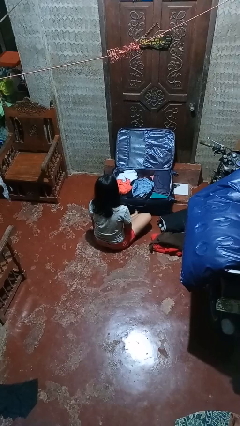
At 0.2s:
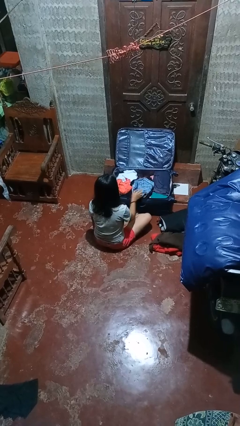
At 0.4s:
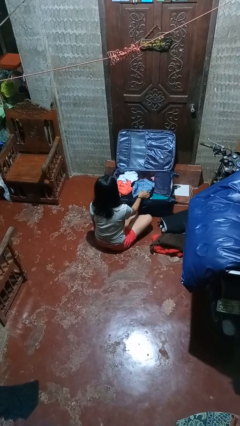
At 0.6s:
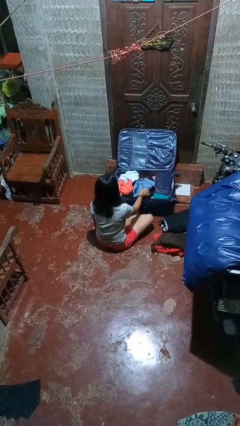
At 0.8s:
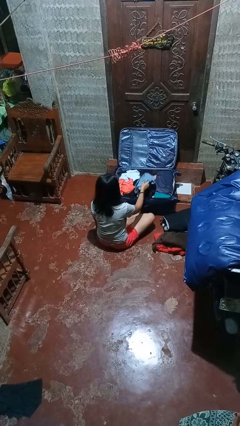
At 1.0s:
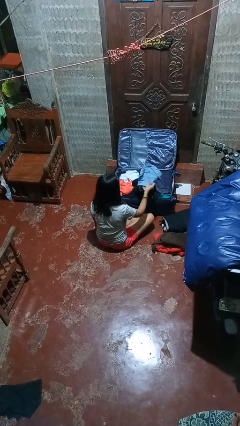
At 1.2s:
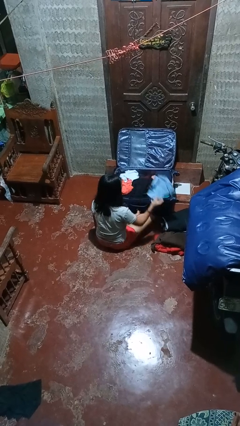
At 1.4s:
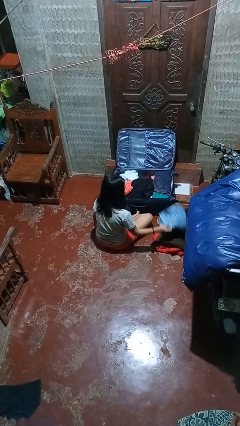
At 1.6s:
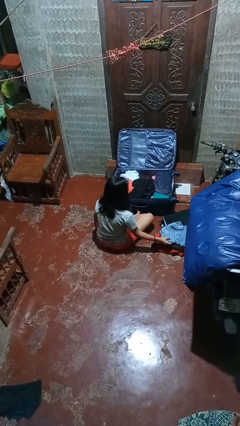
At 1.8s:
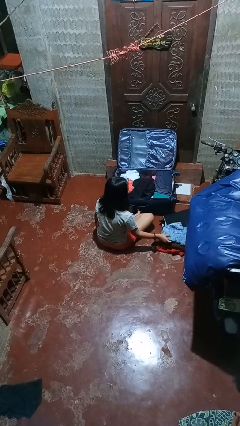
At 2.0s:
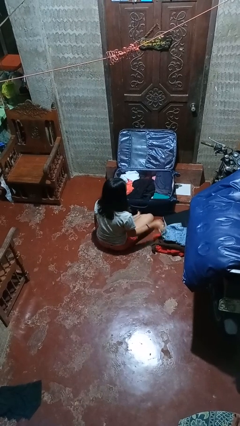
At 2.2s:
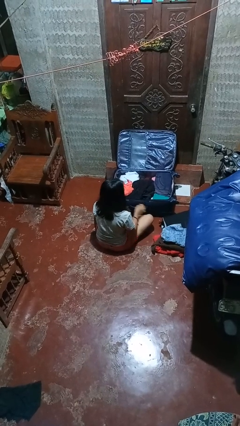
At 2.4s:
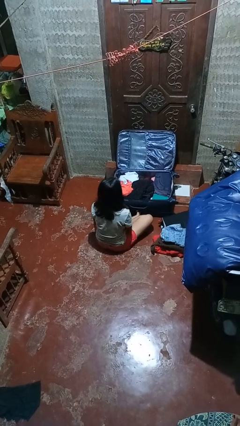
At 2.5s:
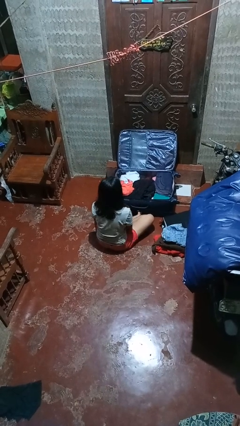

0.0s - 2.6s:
person unloads clothes from suitcase

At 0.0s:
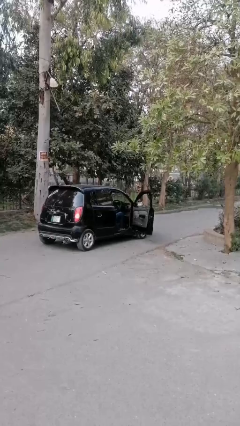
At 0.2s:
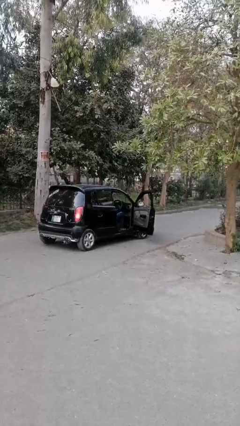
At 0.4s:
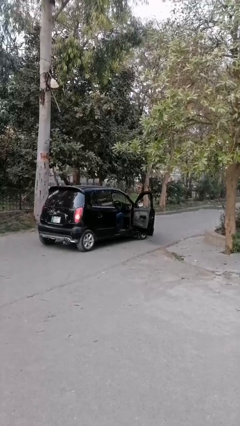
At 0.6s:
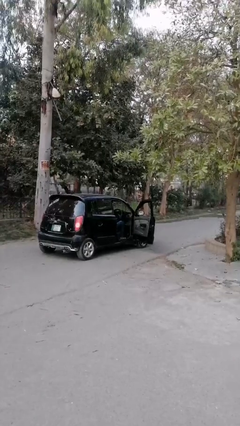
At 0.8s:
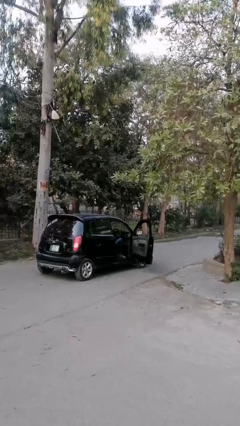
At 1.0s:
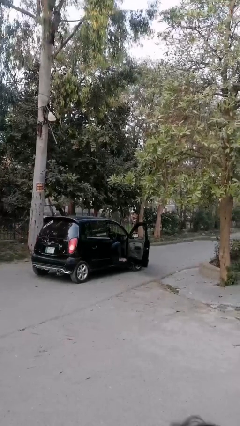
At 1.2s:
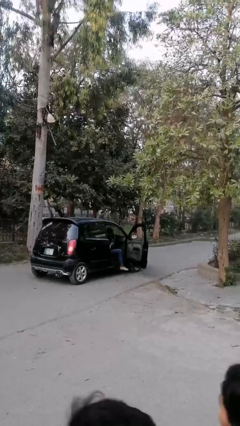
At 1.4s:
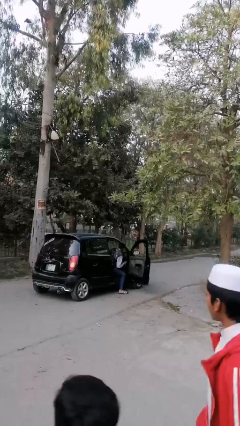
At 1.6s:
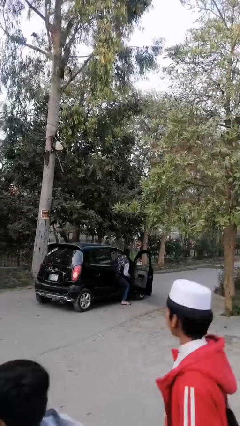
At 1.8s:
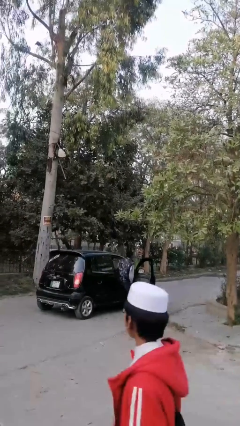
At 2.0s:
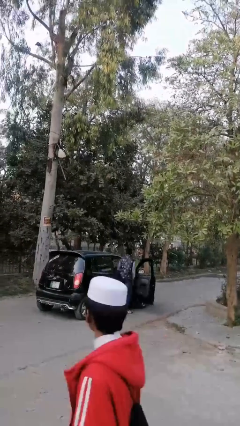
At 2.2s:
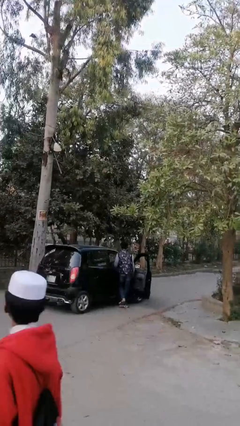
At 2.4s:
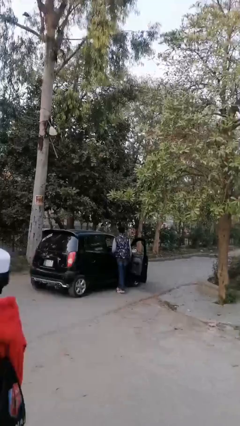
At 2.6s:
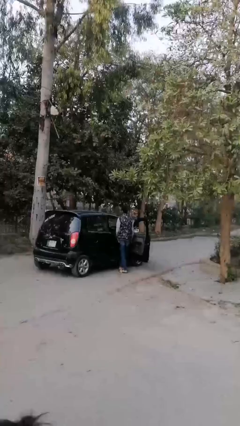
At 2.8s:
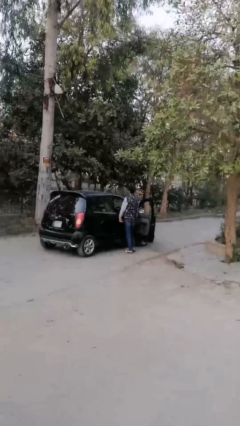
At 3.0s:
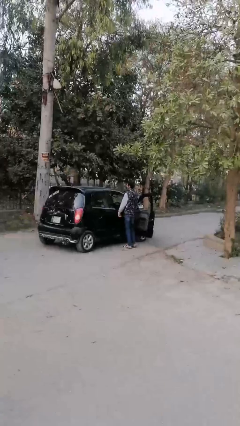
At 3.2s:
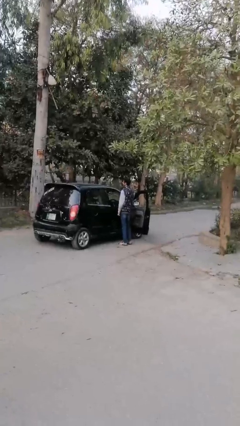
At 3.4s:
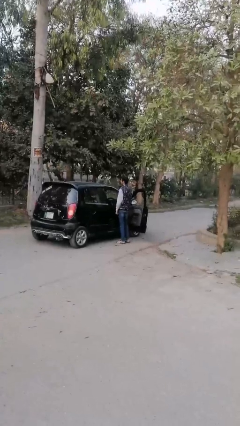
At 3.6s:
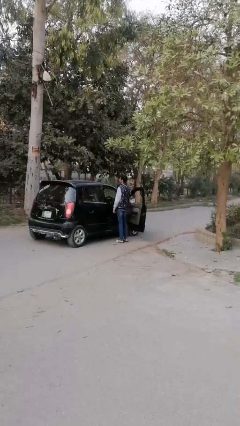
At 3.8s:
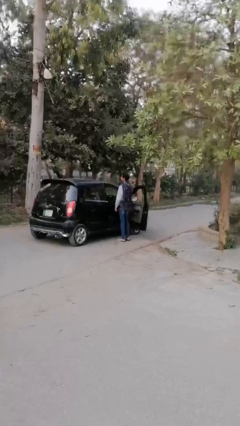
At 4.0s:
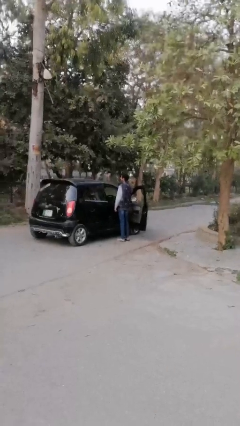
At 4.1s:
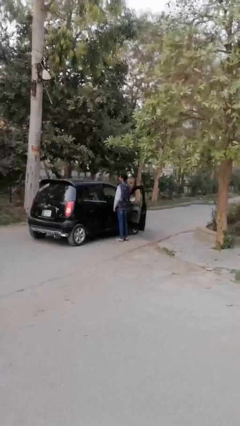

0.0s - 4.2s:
person exits car

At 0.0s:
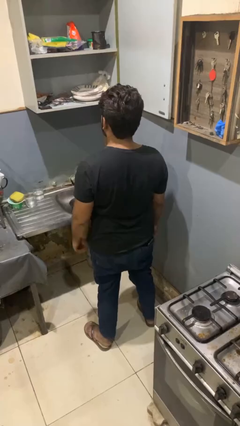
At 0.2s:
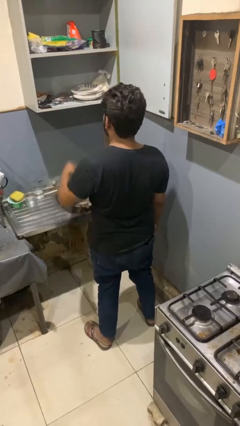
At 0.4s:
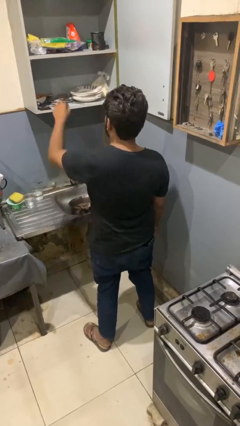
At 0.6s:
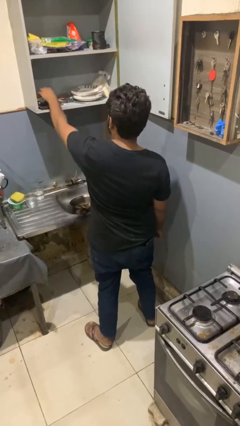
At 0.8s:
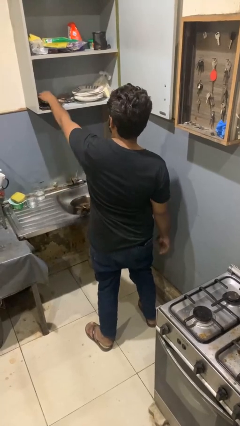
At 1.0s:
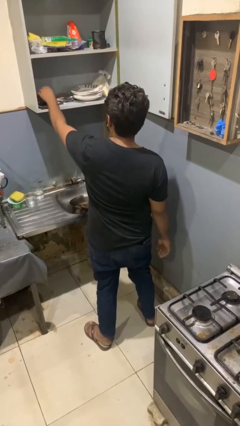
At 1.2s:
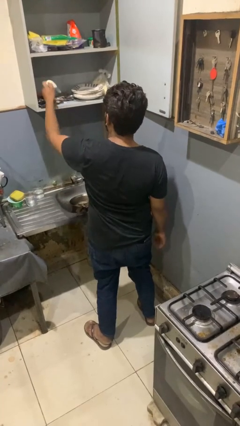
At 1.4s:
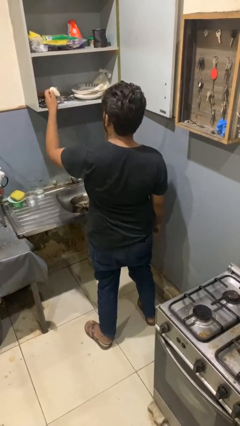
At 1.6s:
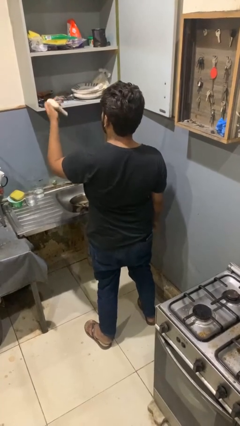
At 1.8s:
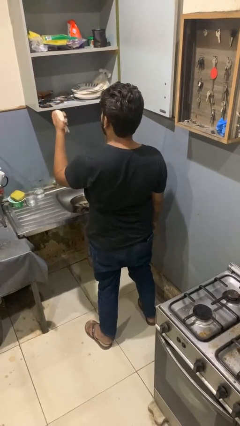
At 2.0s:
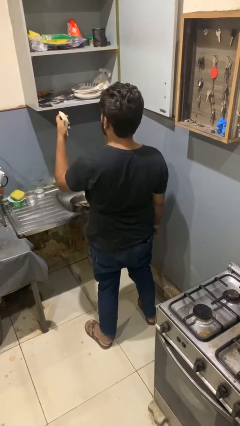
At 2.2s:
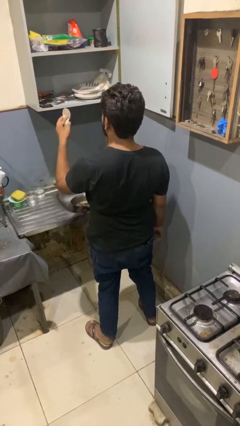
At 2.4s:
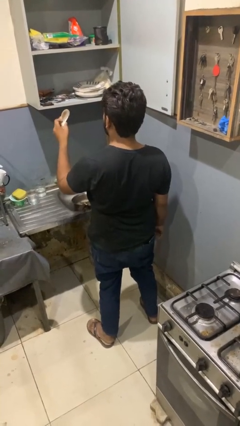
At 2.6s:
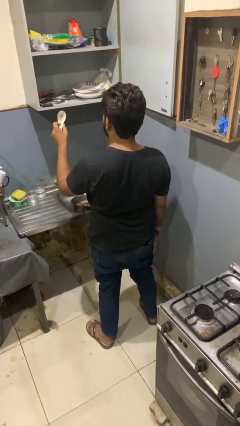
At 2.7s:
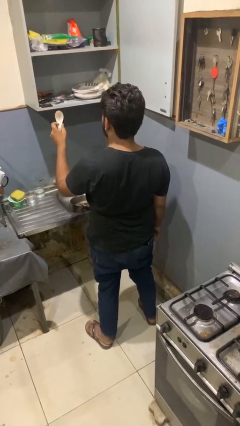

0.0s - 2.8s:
person takes object from kitchen drawer

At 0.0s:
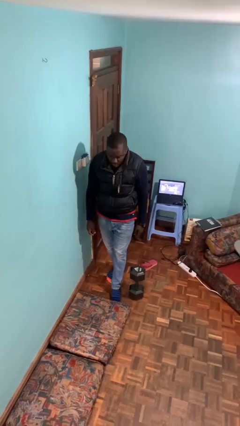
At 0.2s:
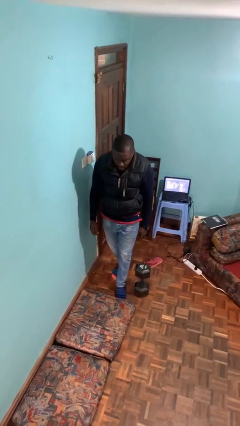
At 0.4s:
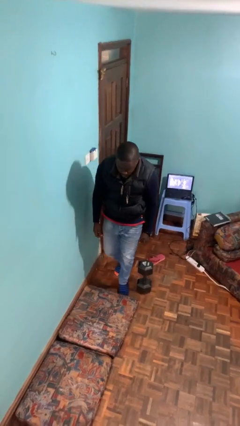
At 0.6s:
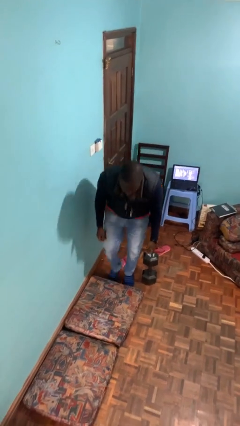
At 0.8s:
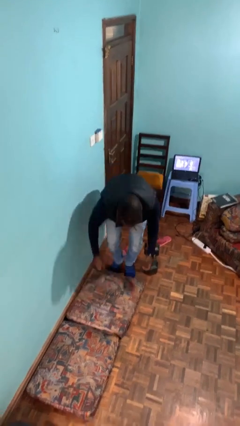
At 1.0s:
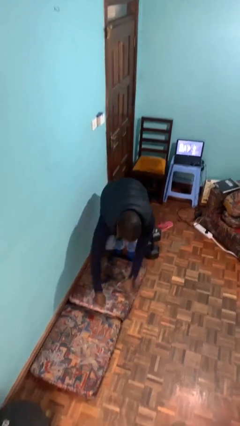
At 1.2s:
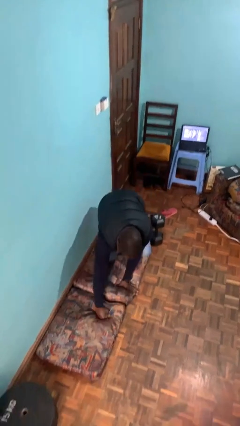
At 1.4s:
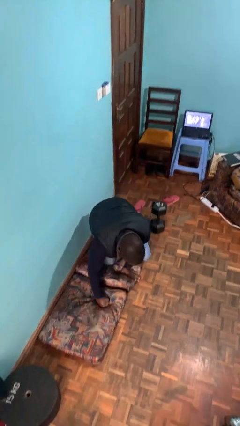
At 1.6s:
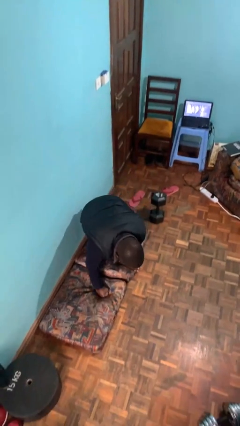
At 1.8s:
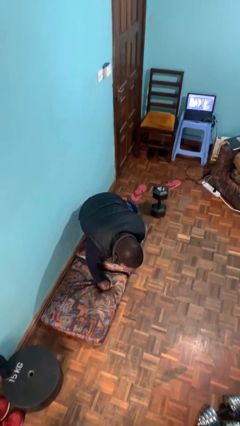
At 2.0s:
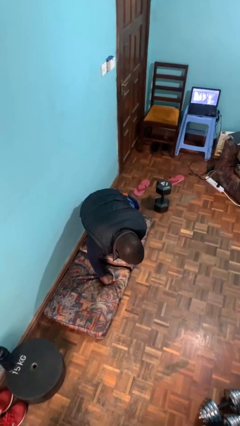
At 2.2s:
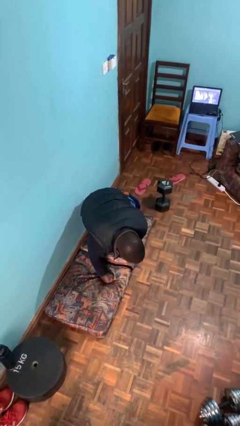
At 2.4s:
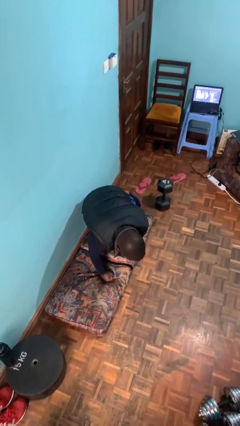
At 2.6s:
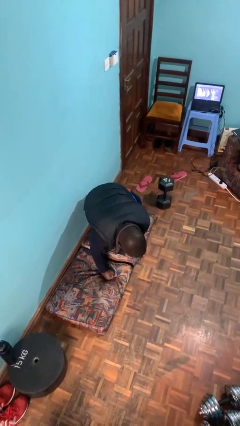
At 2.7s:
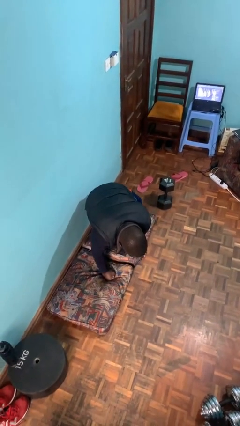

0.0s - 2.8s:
person trips on object on floor

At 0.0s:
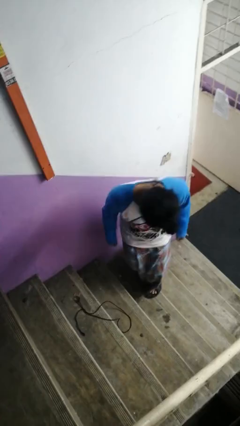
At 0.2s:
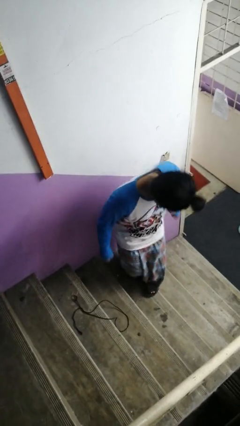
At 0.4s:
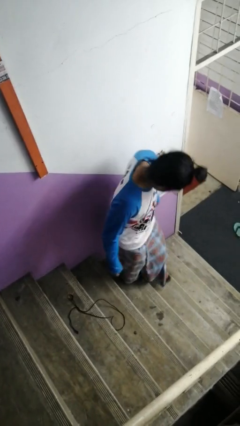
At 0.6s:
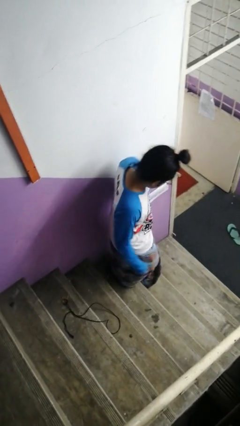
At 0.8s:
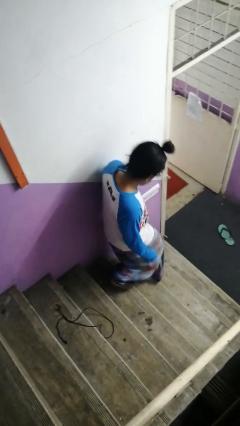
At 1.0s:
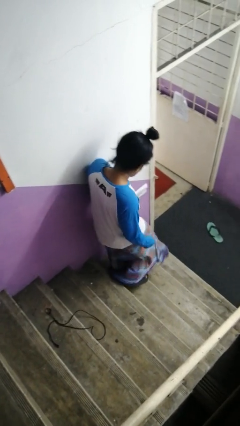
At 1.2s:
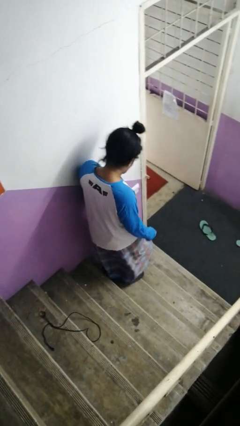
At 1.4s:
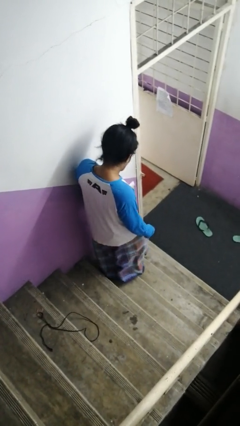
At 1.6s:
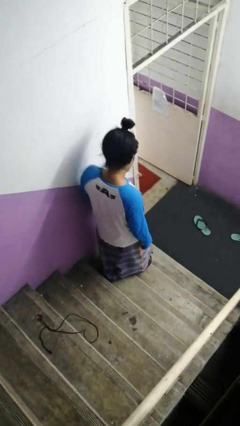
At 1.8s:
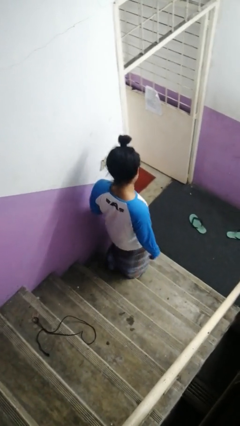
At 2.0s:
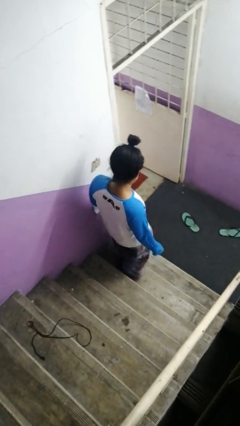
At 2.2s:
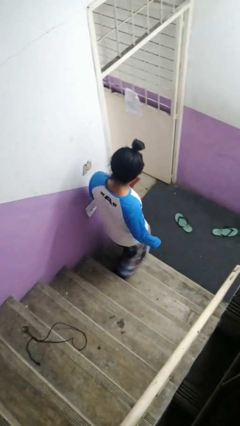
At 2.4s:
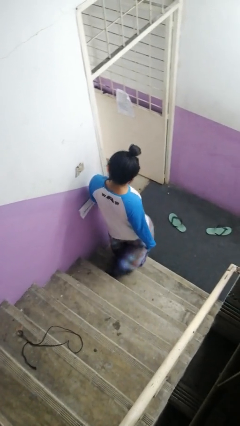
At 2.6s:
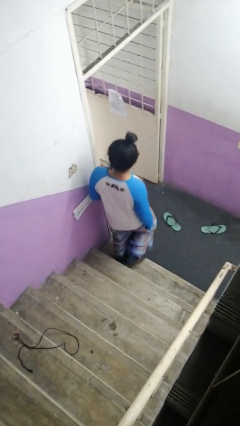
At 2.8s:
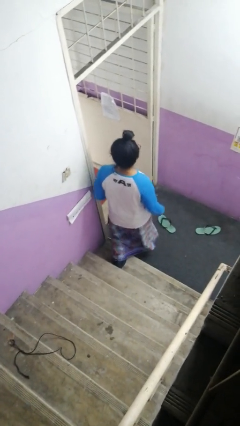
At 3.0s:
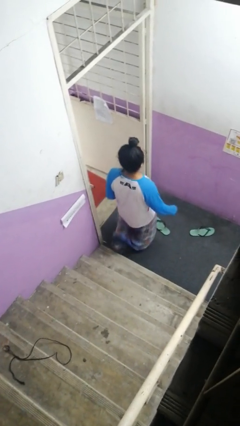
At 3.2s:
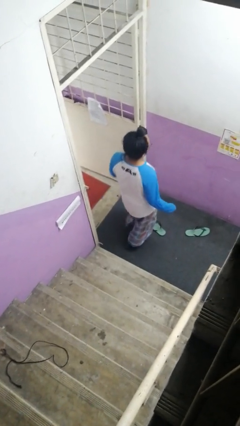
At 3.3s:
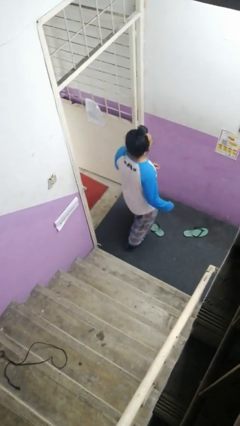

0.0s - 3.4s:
person climbs down stairs

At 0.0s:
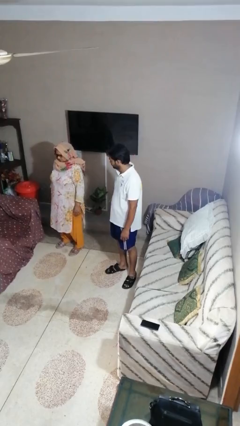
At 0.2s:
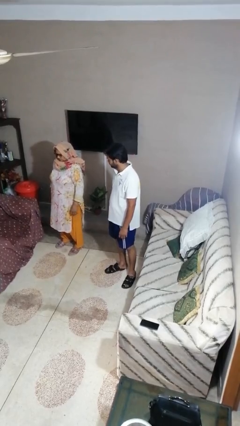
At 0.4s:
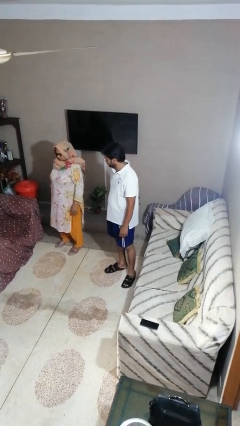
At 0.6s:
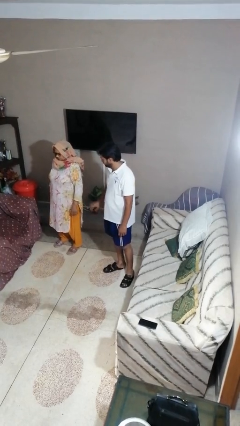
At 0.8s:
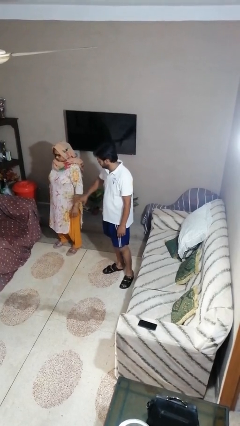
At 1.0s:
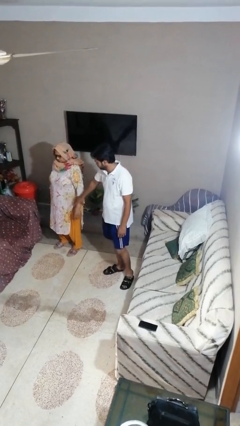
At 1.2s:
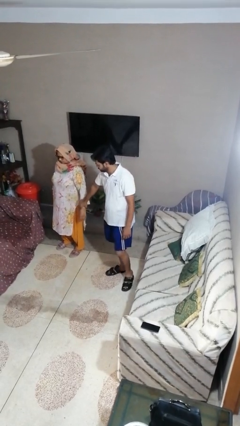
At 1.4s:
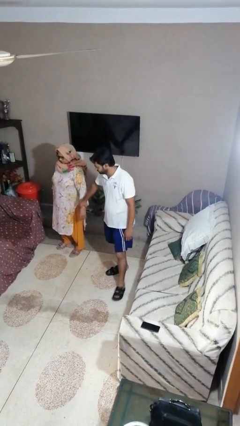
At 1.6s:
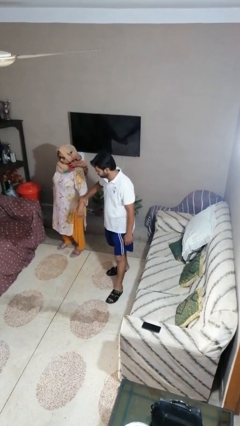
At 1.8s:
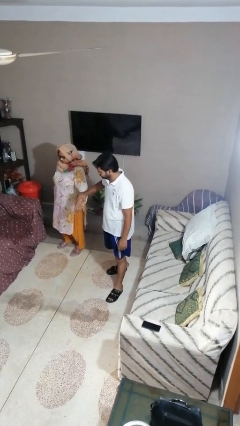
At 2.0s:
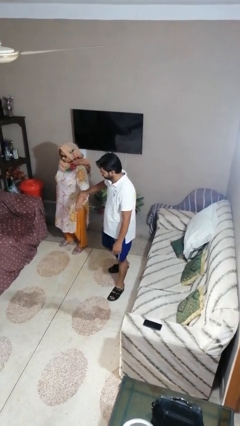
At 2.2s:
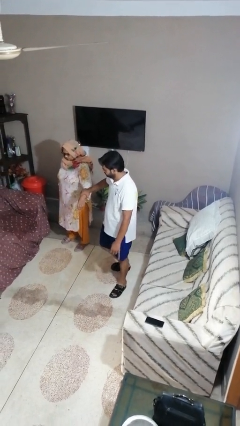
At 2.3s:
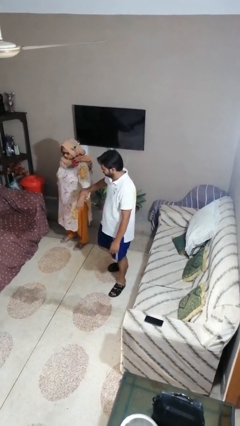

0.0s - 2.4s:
person grabs person by forearm
